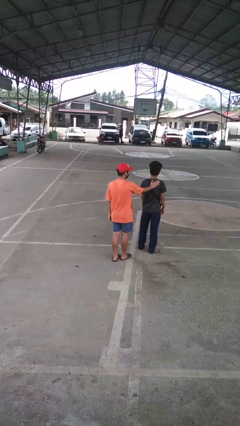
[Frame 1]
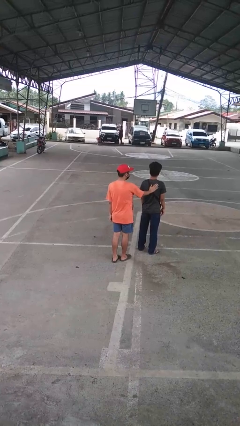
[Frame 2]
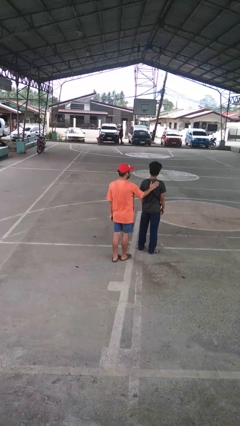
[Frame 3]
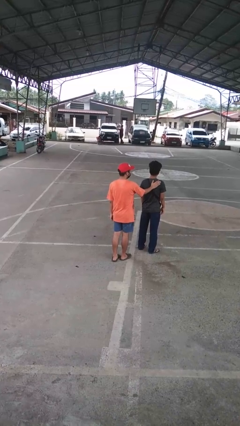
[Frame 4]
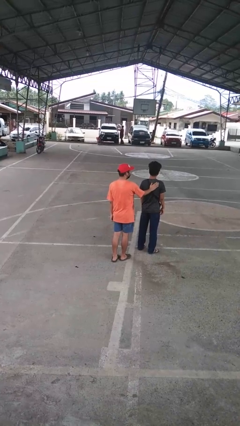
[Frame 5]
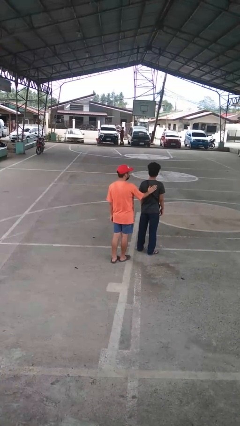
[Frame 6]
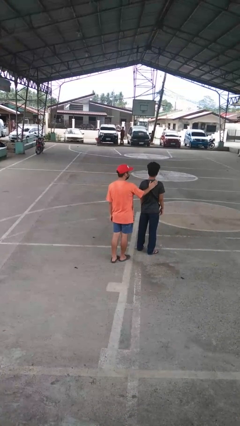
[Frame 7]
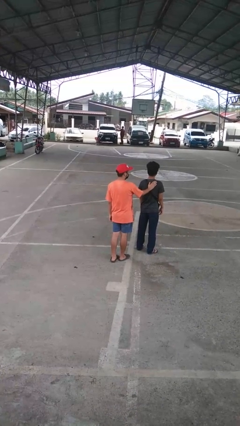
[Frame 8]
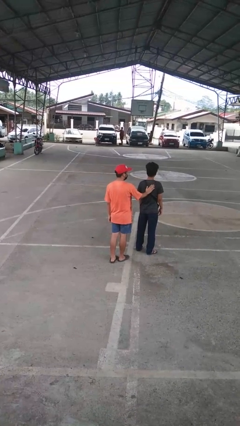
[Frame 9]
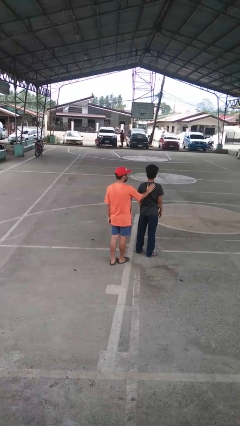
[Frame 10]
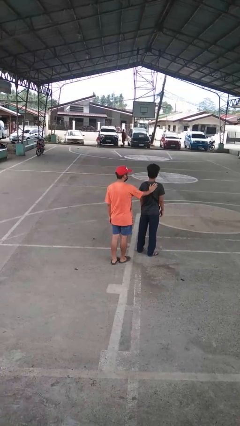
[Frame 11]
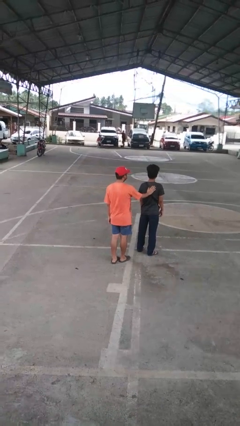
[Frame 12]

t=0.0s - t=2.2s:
person touches back of person

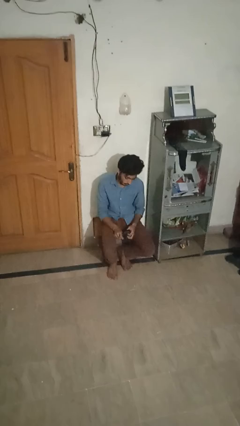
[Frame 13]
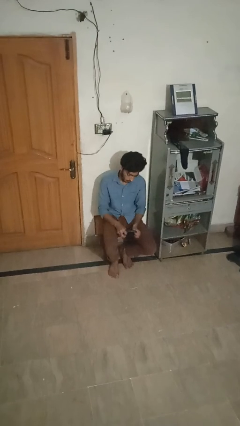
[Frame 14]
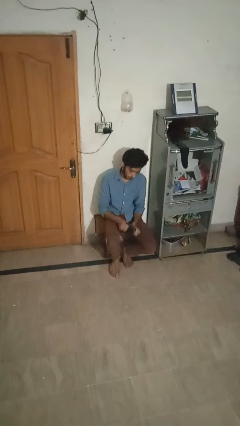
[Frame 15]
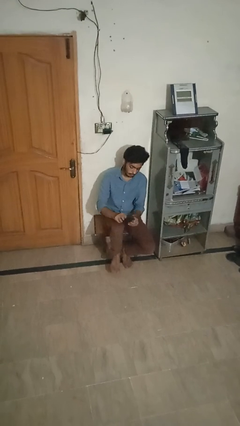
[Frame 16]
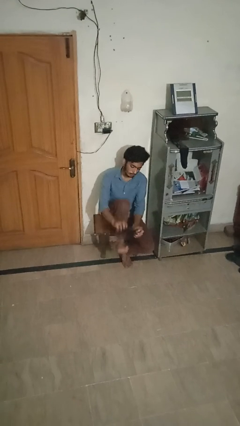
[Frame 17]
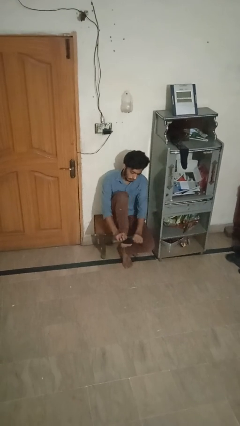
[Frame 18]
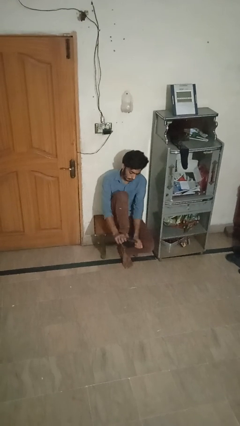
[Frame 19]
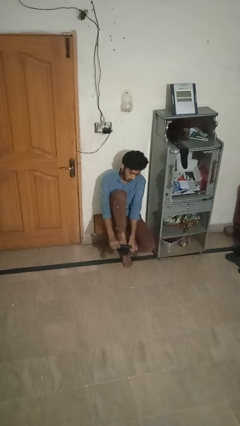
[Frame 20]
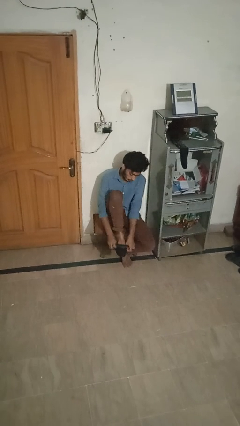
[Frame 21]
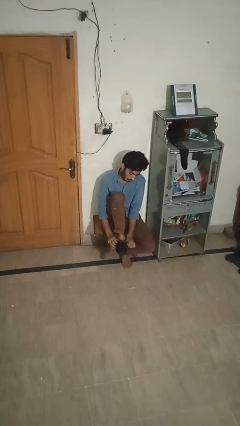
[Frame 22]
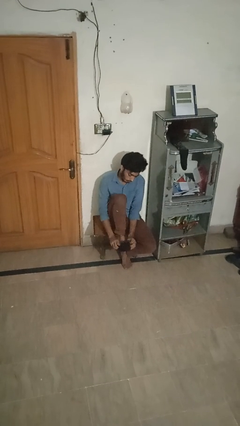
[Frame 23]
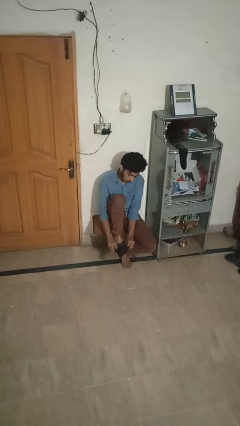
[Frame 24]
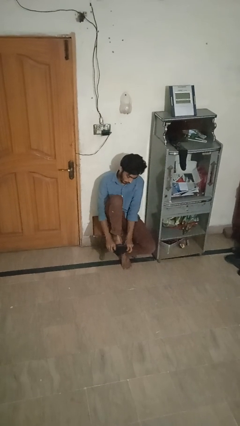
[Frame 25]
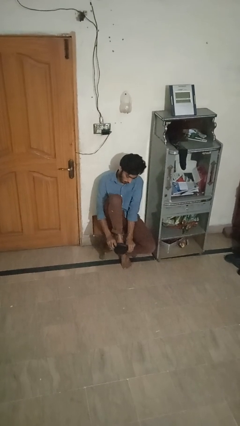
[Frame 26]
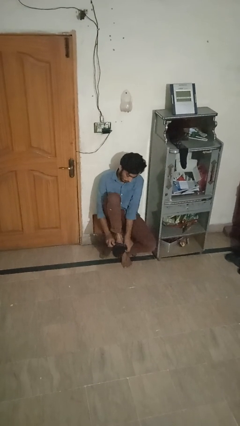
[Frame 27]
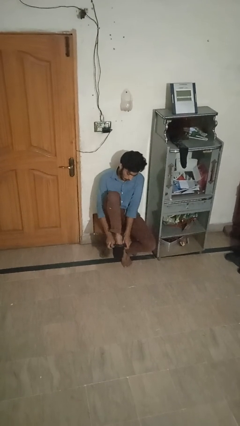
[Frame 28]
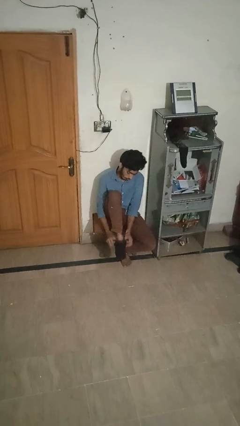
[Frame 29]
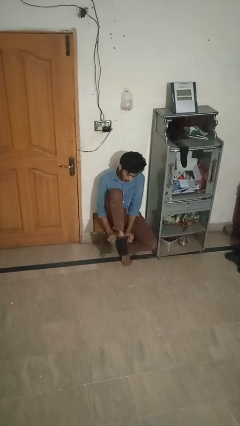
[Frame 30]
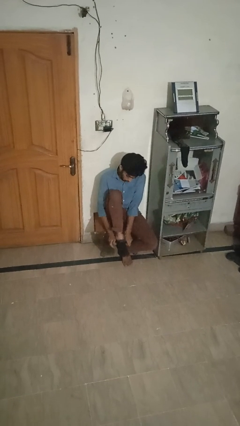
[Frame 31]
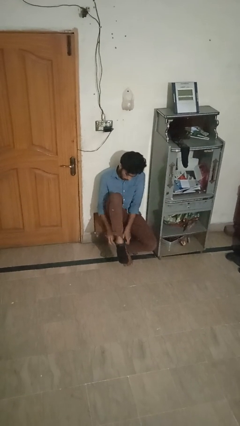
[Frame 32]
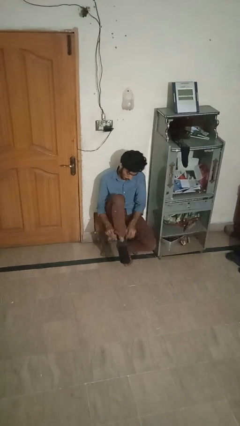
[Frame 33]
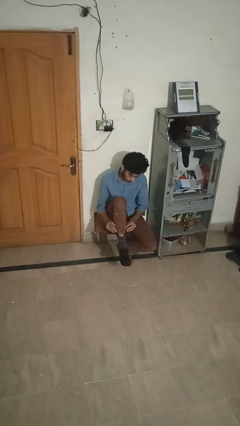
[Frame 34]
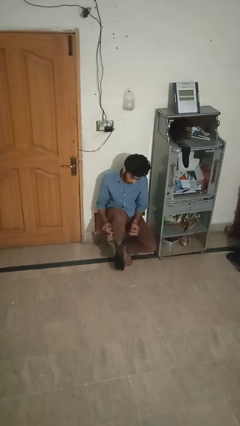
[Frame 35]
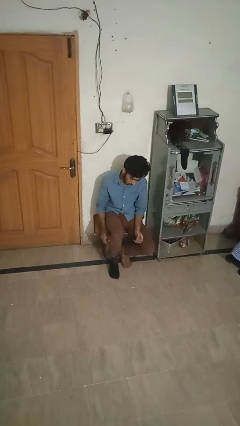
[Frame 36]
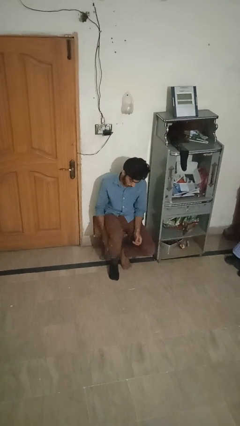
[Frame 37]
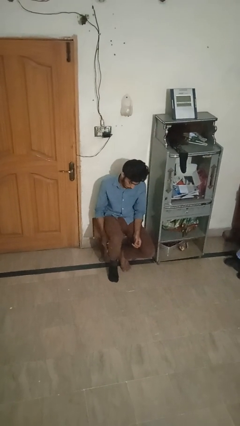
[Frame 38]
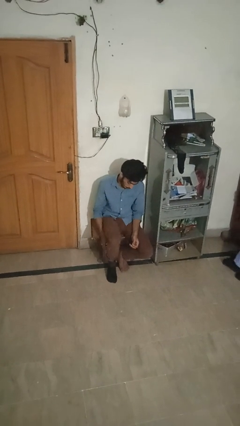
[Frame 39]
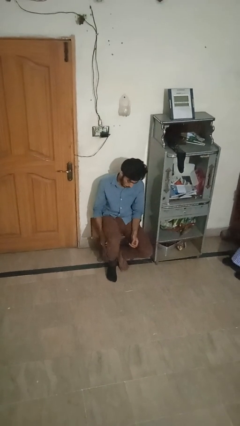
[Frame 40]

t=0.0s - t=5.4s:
person puts on socks

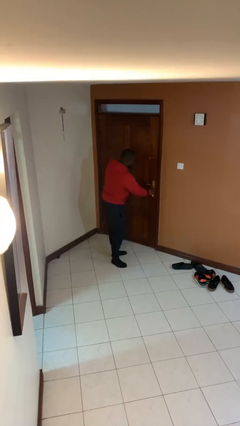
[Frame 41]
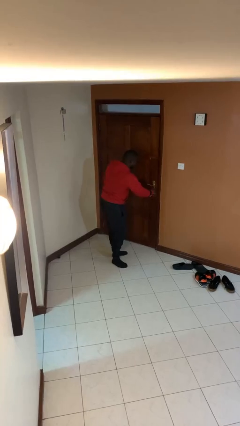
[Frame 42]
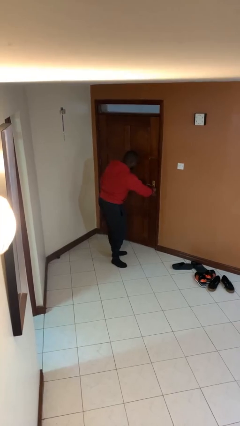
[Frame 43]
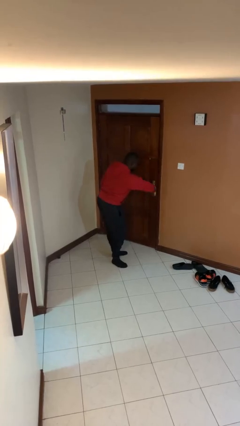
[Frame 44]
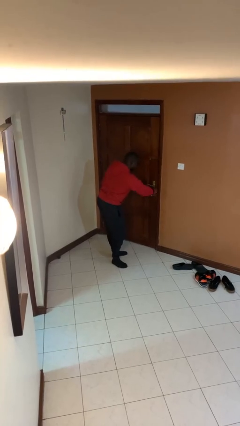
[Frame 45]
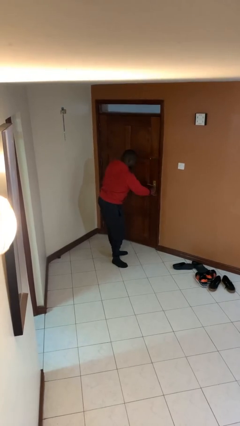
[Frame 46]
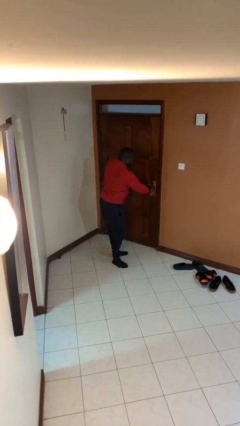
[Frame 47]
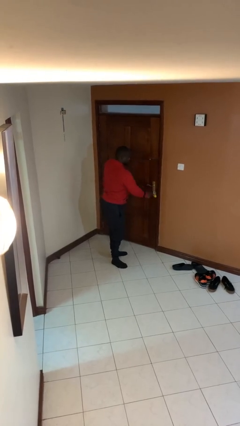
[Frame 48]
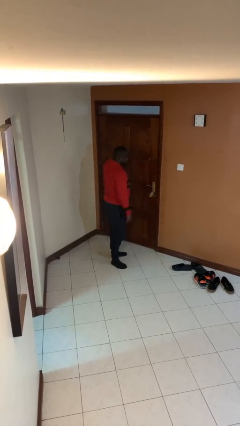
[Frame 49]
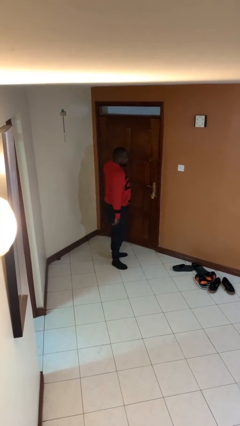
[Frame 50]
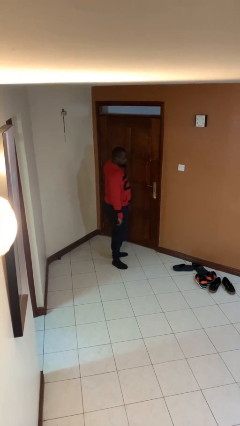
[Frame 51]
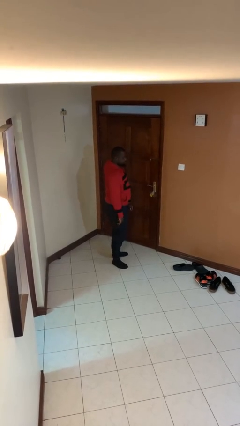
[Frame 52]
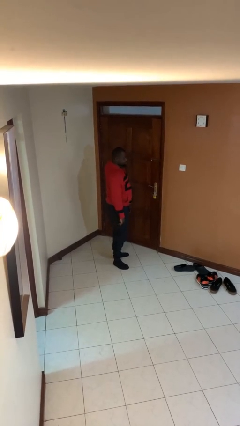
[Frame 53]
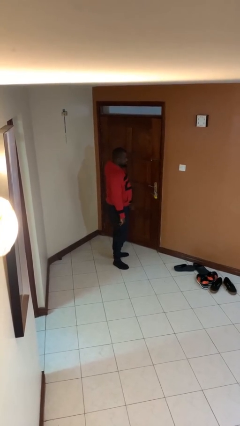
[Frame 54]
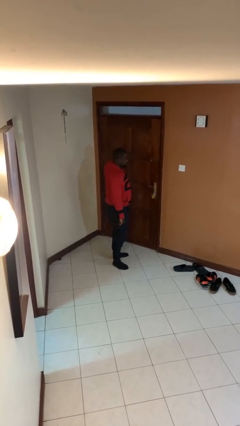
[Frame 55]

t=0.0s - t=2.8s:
person unlocks door with keys

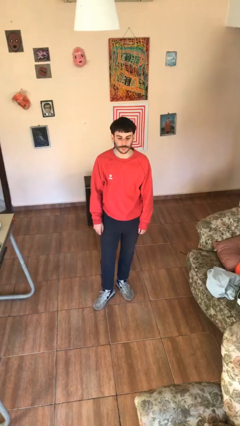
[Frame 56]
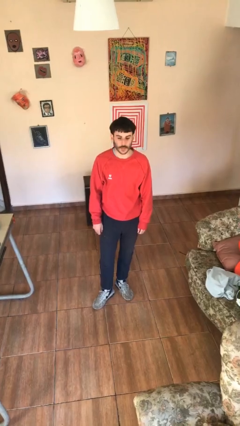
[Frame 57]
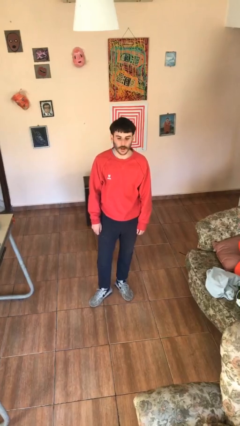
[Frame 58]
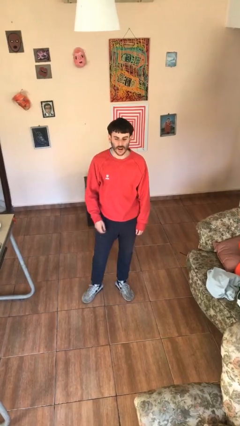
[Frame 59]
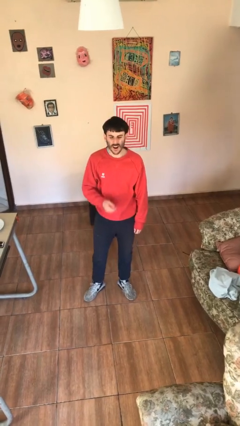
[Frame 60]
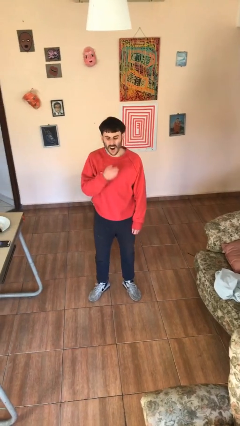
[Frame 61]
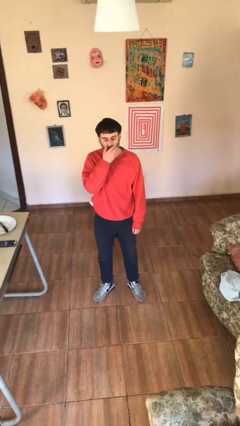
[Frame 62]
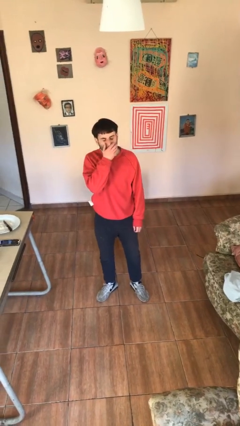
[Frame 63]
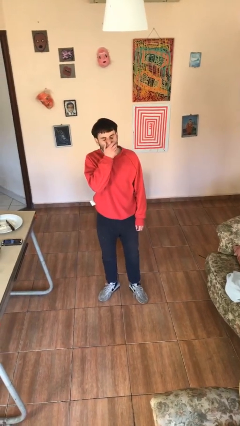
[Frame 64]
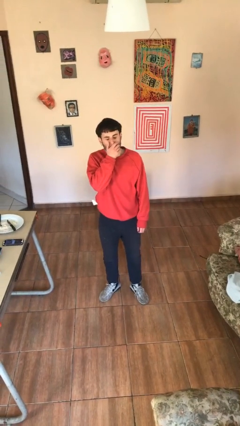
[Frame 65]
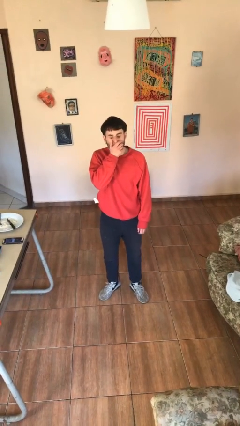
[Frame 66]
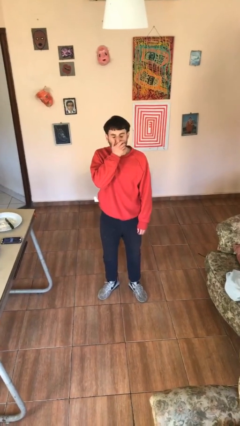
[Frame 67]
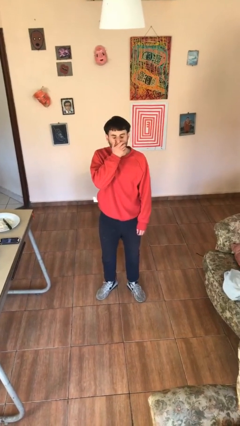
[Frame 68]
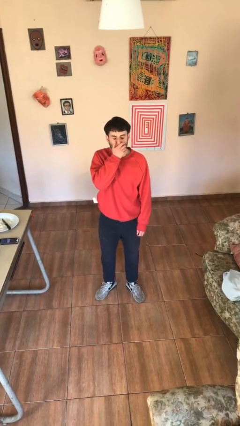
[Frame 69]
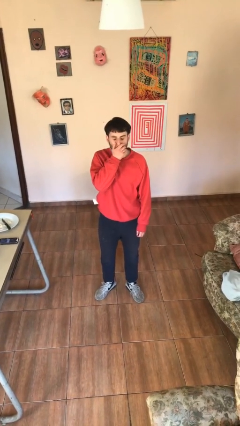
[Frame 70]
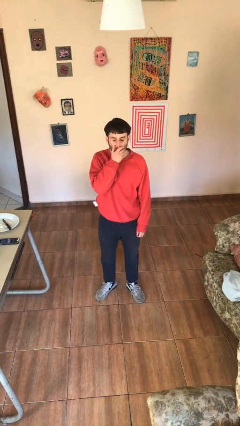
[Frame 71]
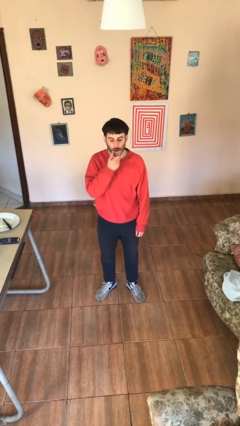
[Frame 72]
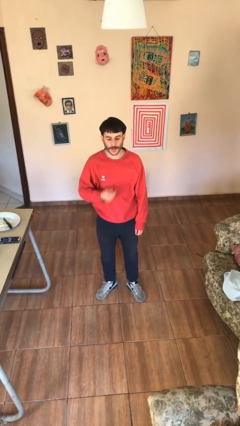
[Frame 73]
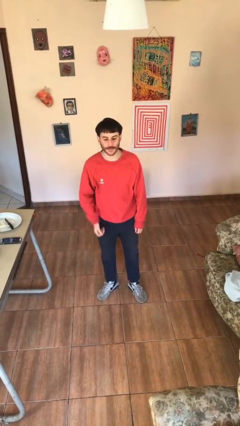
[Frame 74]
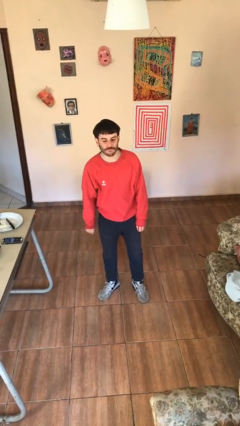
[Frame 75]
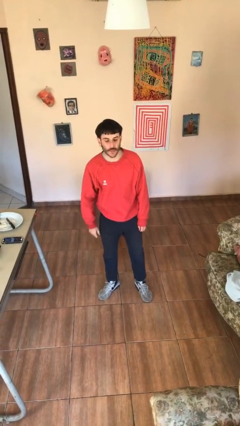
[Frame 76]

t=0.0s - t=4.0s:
person yawns

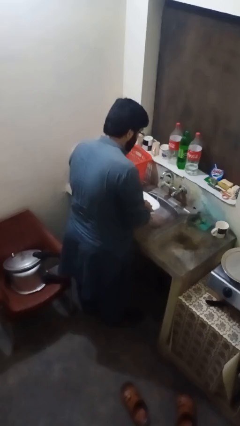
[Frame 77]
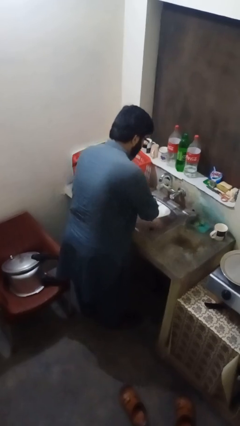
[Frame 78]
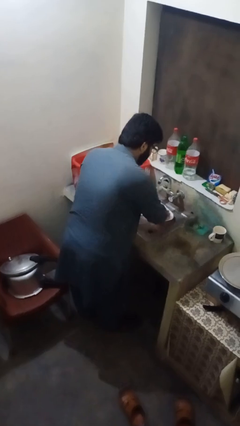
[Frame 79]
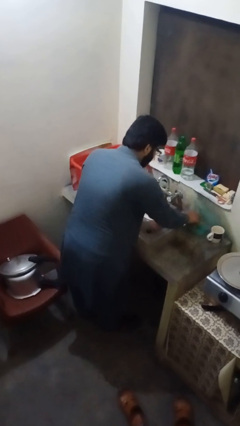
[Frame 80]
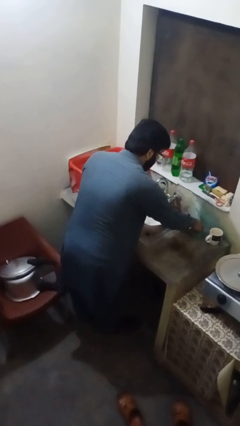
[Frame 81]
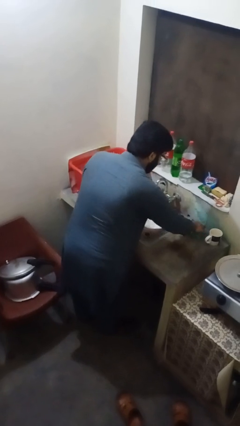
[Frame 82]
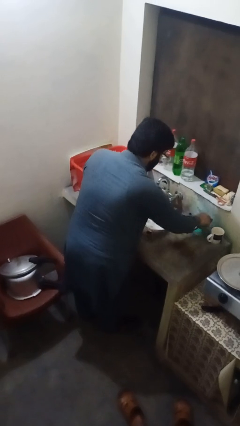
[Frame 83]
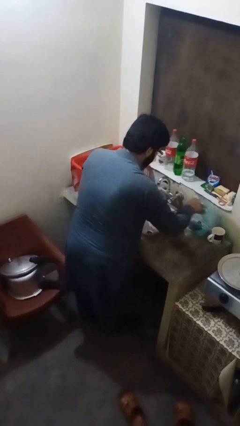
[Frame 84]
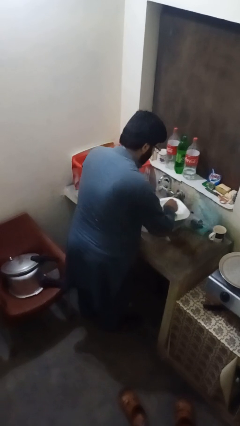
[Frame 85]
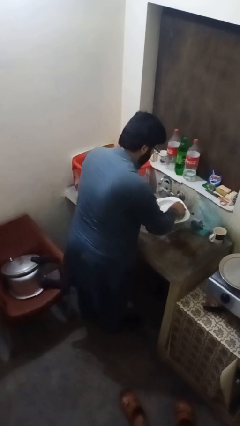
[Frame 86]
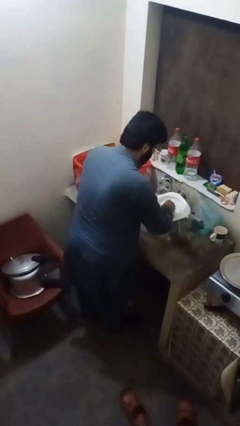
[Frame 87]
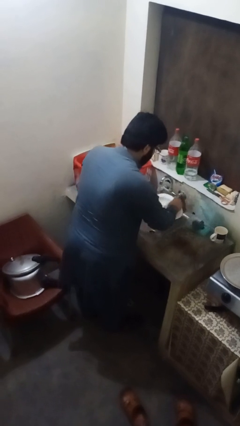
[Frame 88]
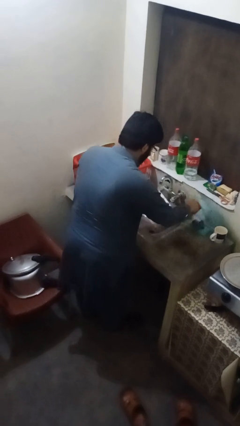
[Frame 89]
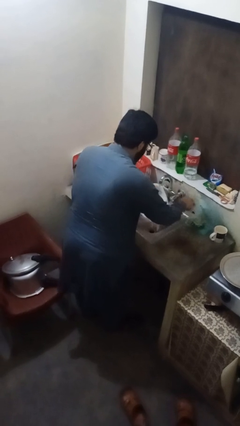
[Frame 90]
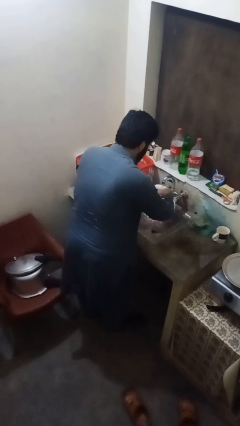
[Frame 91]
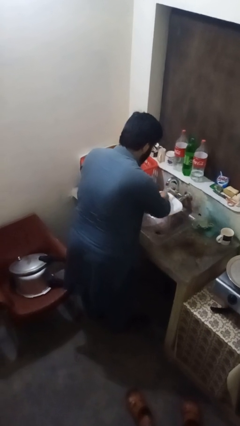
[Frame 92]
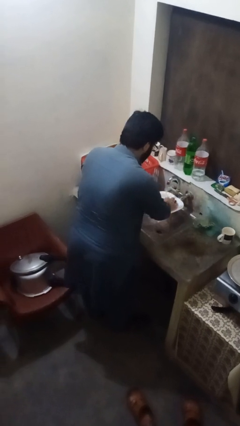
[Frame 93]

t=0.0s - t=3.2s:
person washes dish
